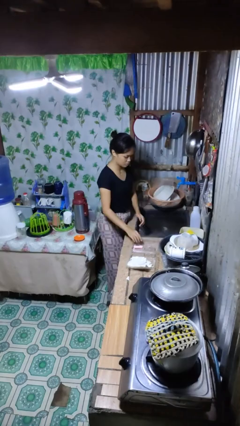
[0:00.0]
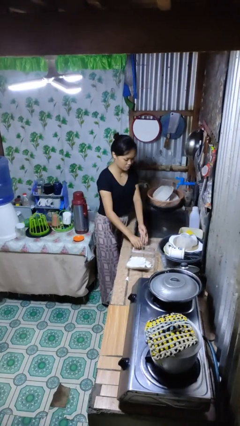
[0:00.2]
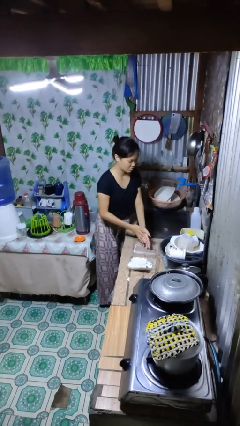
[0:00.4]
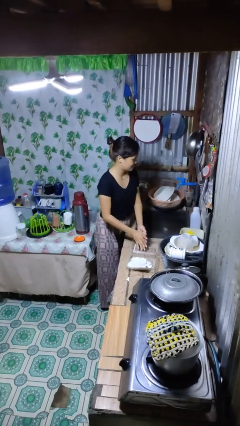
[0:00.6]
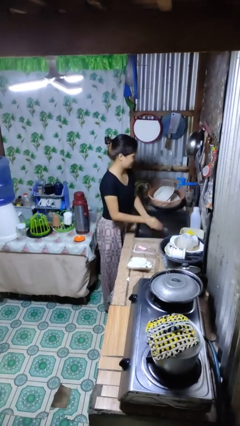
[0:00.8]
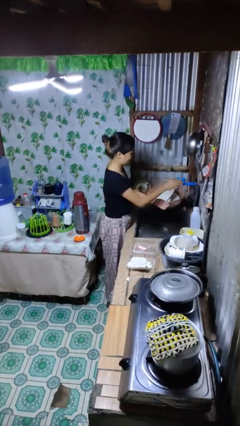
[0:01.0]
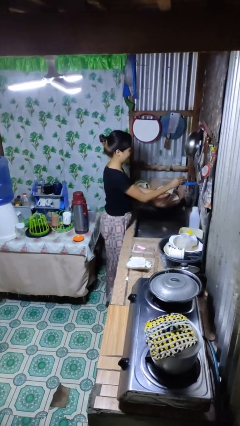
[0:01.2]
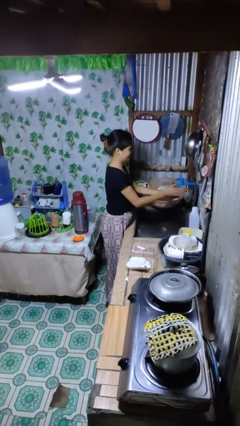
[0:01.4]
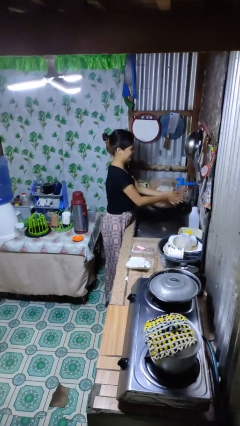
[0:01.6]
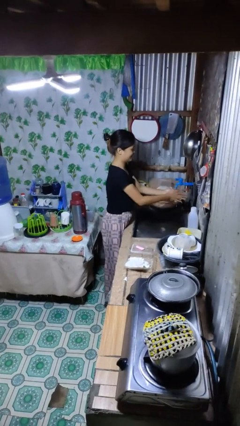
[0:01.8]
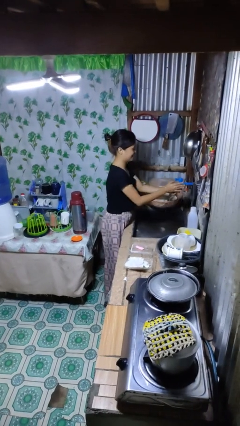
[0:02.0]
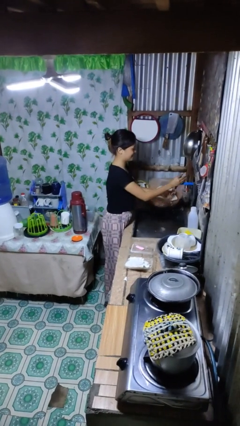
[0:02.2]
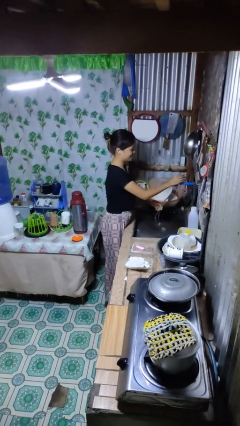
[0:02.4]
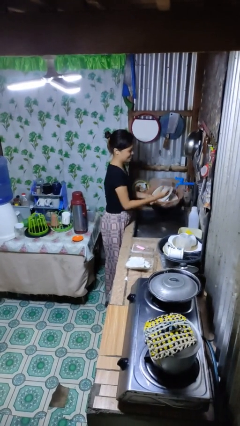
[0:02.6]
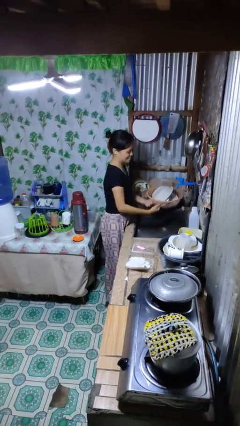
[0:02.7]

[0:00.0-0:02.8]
person washes hands

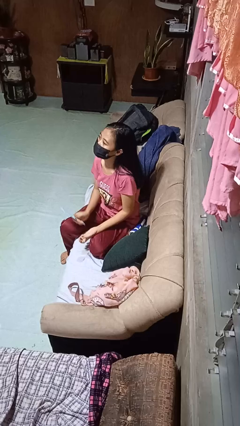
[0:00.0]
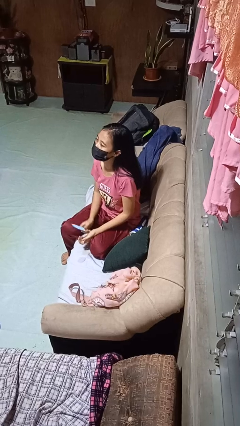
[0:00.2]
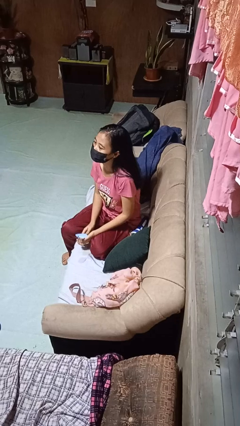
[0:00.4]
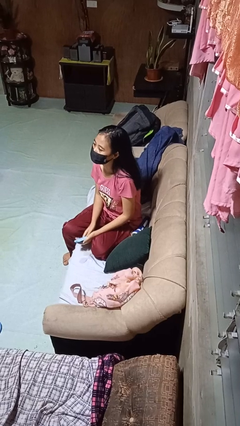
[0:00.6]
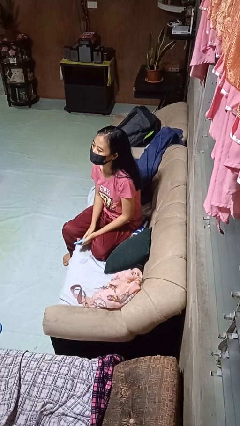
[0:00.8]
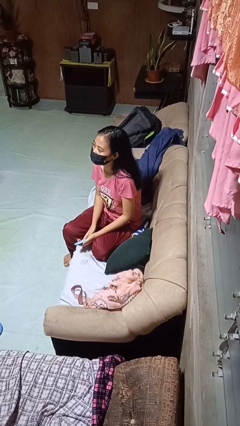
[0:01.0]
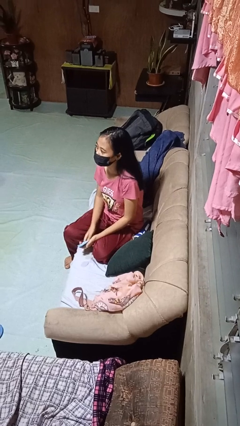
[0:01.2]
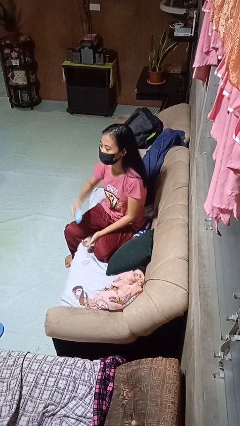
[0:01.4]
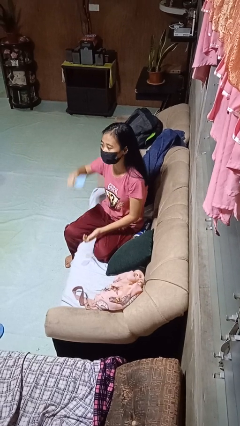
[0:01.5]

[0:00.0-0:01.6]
person brushes hair

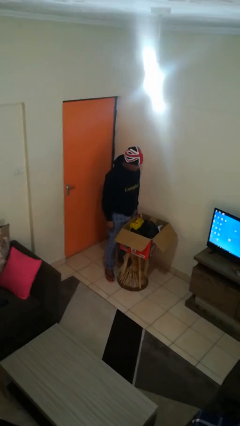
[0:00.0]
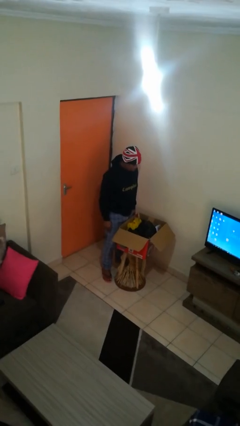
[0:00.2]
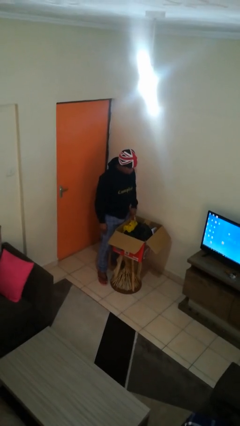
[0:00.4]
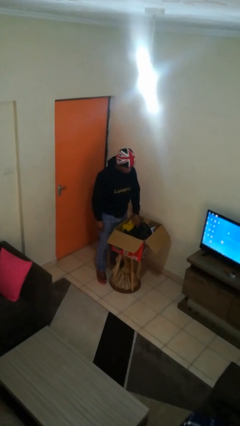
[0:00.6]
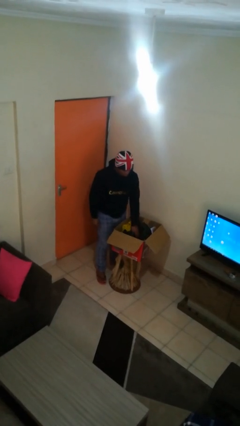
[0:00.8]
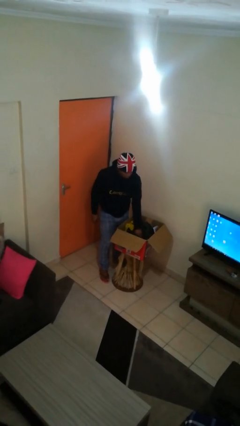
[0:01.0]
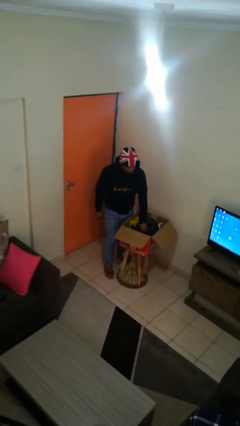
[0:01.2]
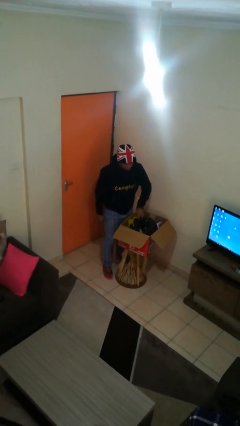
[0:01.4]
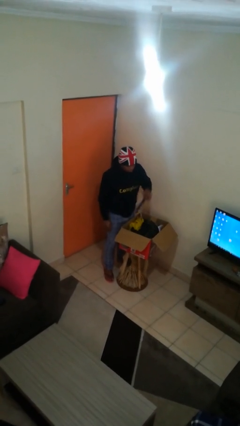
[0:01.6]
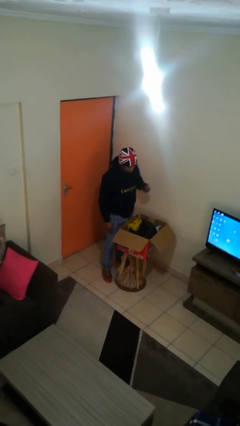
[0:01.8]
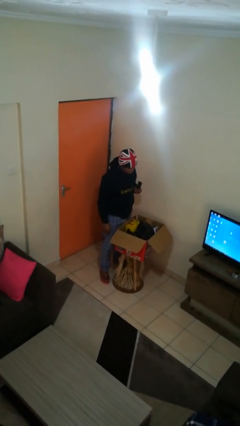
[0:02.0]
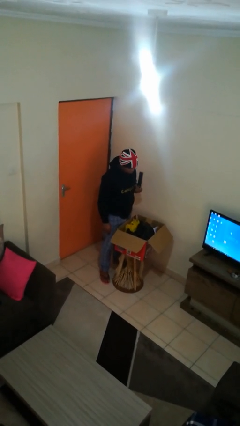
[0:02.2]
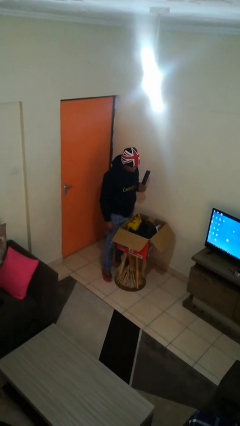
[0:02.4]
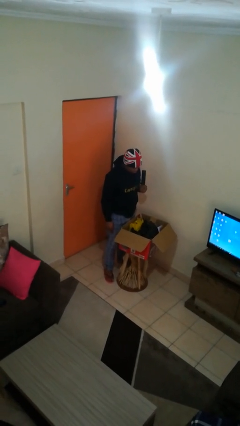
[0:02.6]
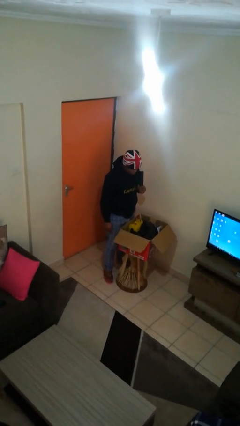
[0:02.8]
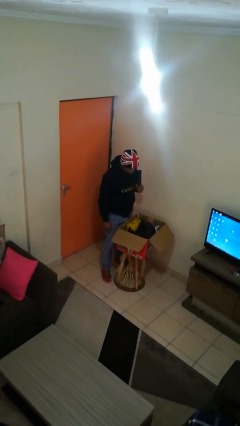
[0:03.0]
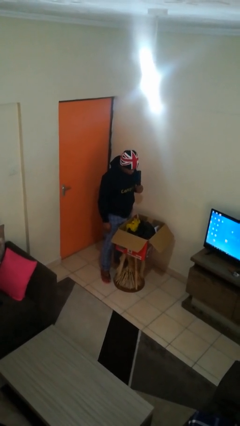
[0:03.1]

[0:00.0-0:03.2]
person takes object from box

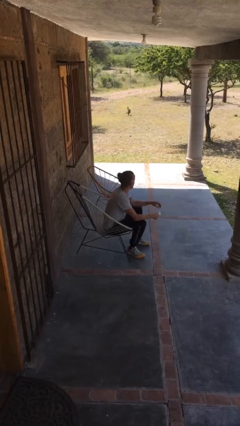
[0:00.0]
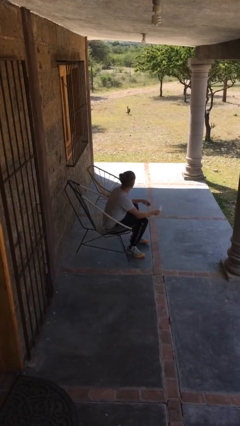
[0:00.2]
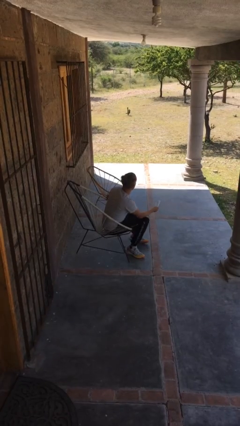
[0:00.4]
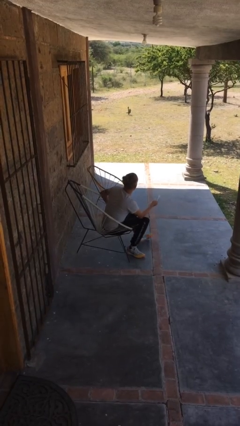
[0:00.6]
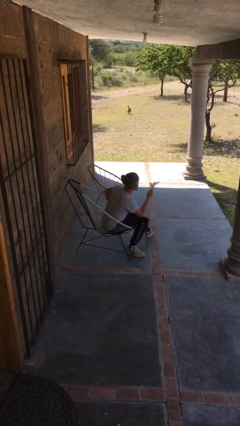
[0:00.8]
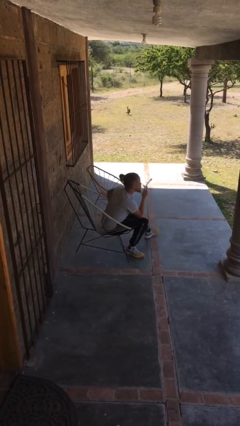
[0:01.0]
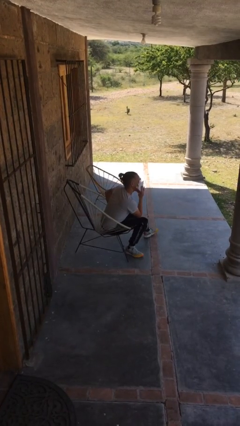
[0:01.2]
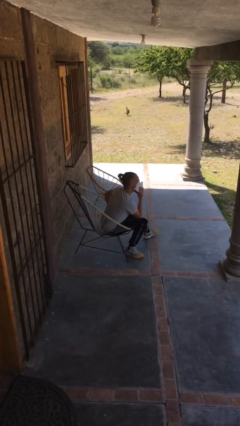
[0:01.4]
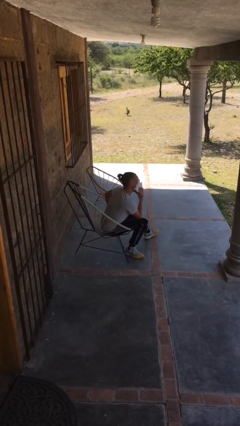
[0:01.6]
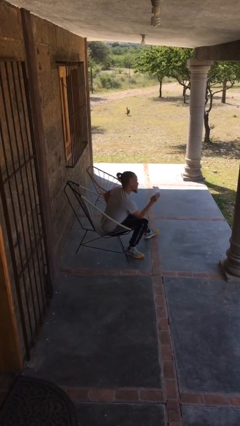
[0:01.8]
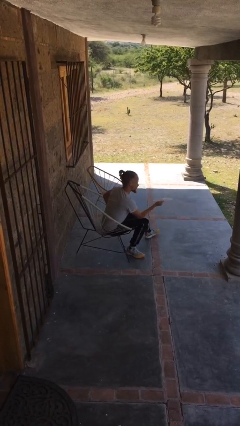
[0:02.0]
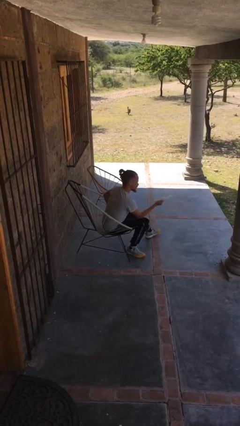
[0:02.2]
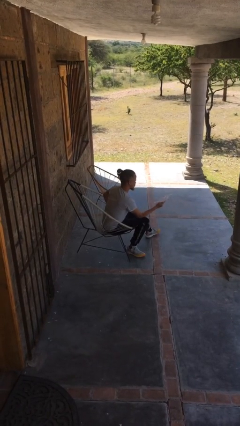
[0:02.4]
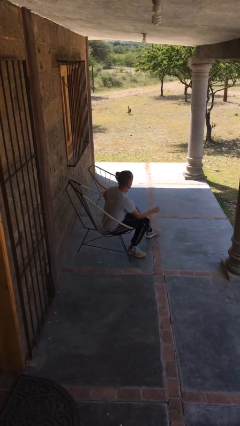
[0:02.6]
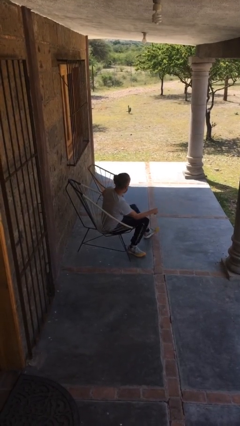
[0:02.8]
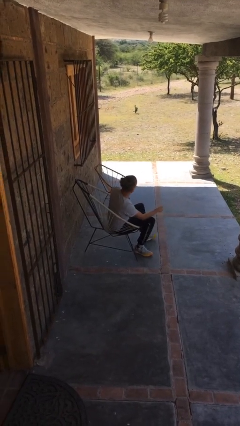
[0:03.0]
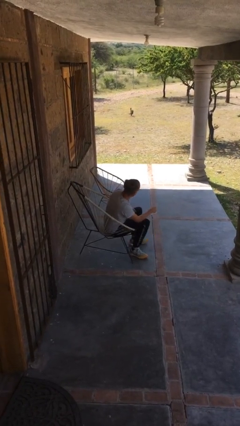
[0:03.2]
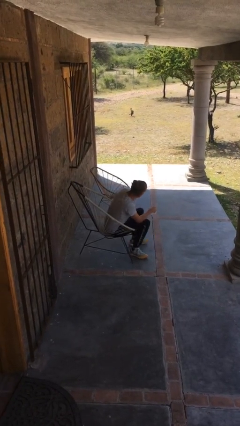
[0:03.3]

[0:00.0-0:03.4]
person wipes mouth with napkin

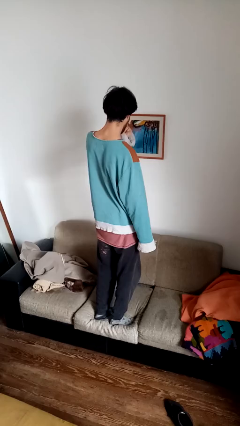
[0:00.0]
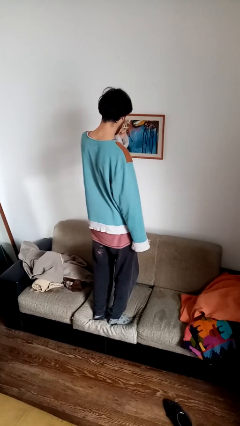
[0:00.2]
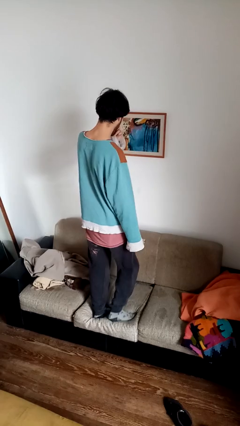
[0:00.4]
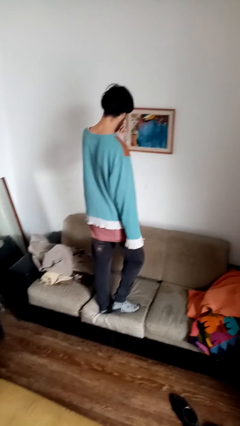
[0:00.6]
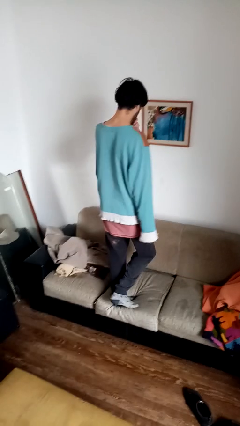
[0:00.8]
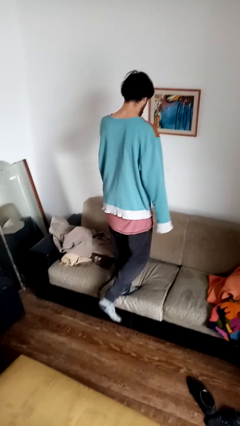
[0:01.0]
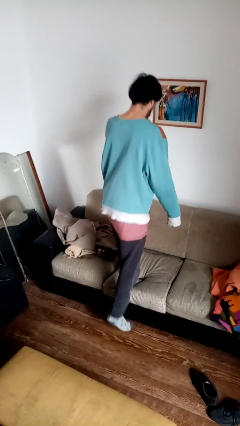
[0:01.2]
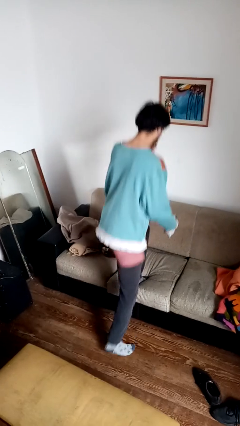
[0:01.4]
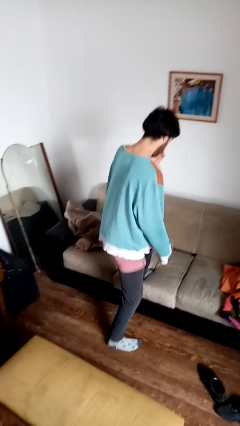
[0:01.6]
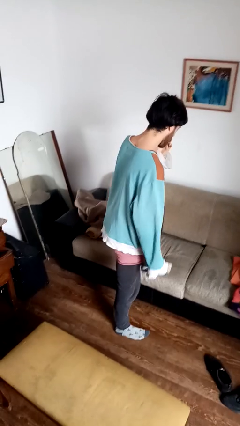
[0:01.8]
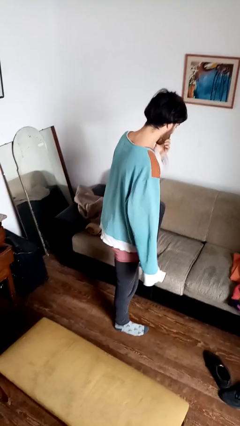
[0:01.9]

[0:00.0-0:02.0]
person climbs off couch

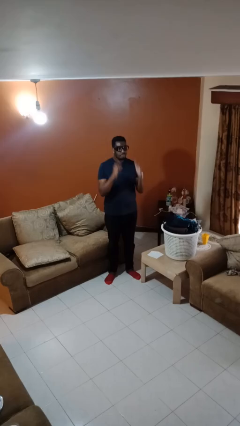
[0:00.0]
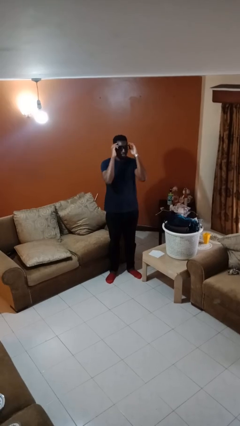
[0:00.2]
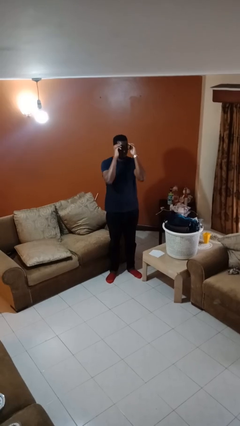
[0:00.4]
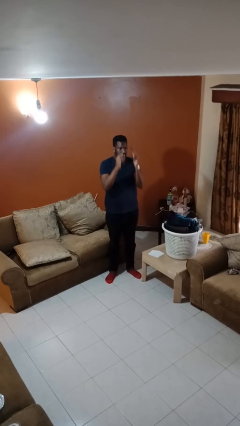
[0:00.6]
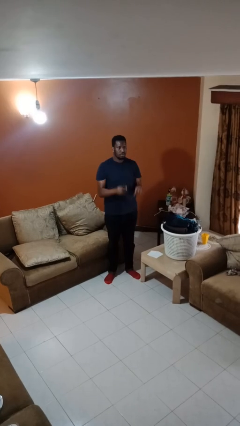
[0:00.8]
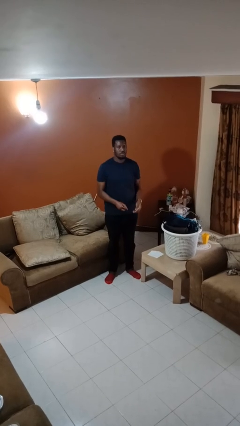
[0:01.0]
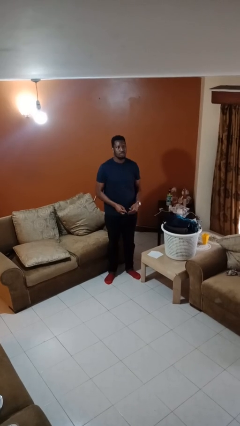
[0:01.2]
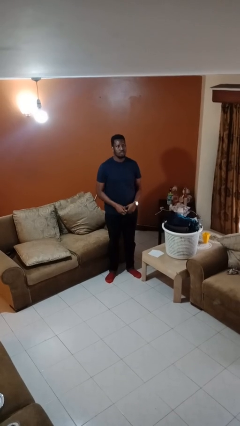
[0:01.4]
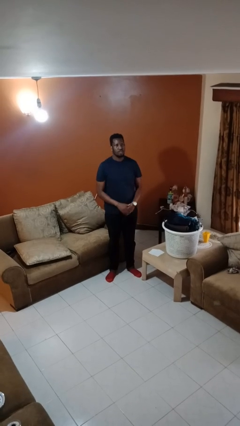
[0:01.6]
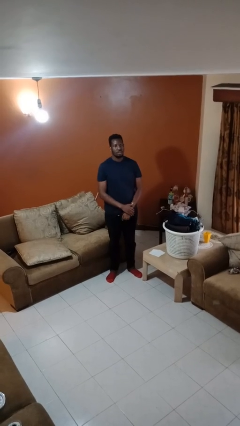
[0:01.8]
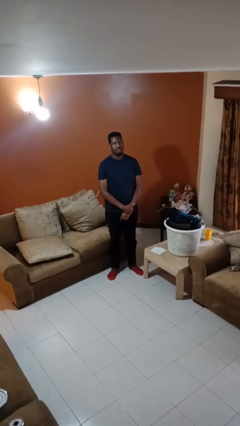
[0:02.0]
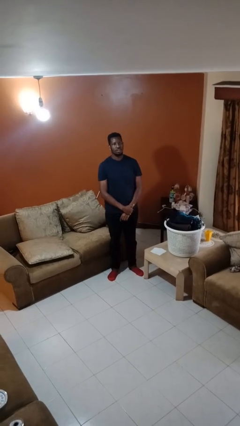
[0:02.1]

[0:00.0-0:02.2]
person takes off glasses

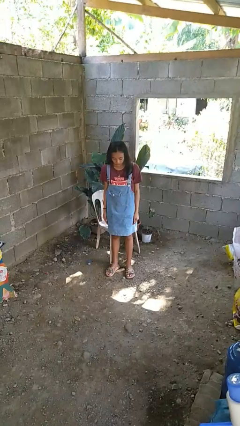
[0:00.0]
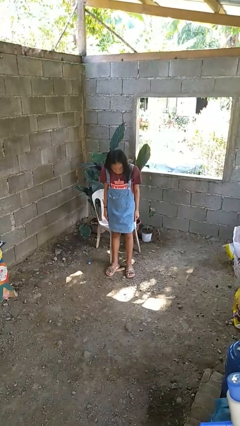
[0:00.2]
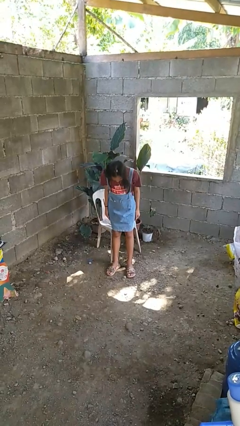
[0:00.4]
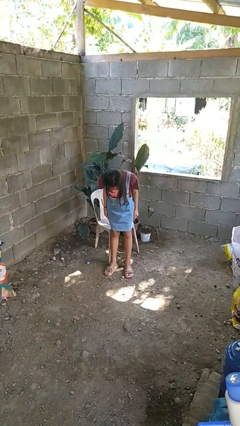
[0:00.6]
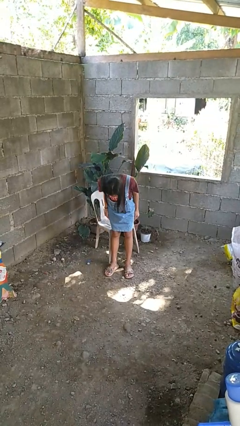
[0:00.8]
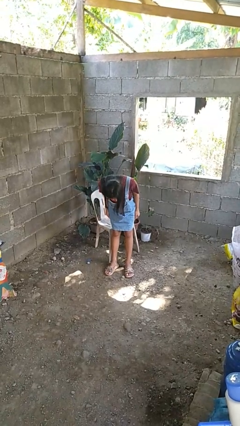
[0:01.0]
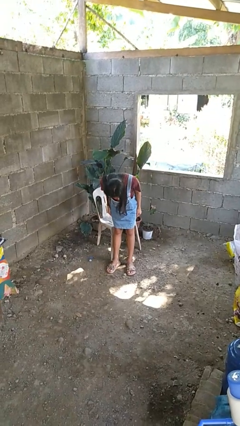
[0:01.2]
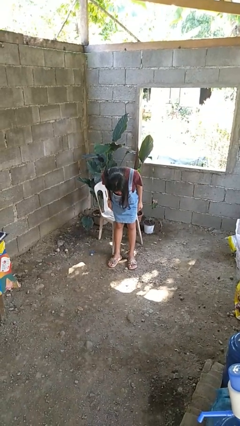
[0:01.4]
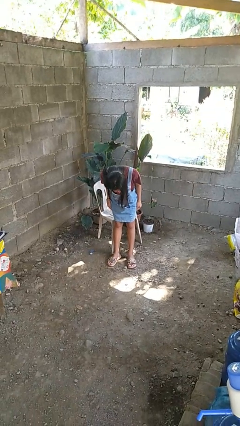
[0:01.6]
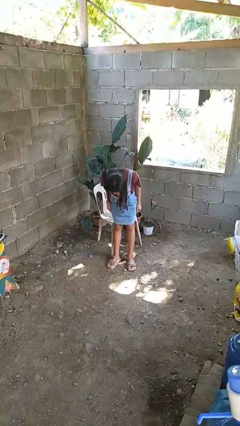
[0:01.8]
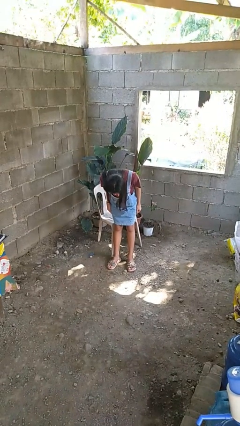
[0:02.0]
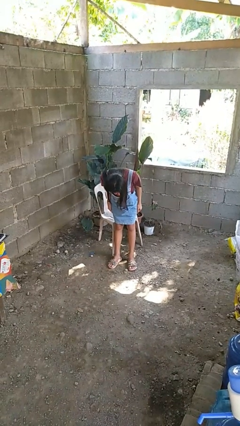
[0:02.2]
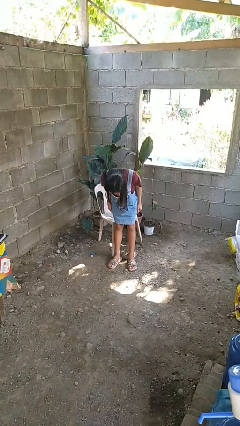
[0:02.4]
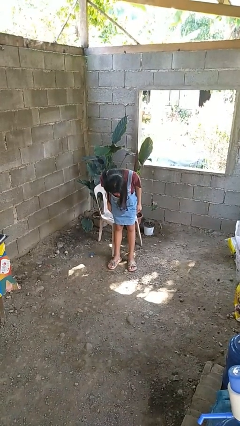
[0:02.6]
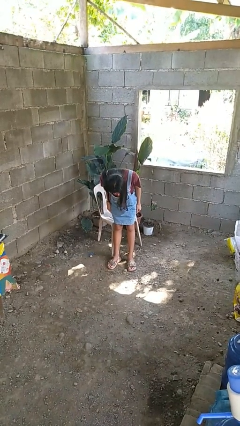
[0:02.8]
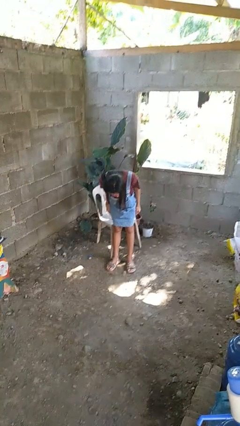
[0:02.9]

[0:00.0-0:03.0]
person bows
